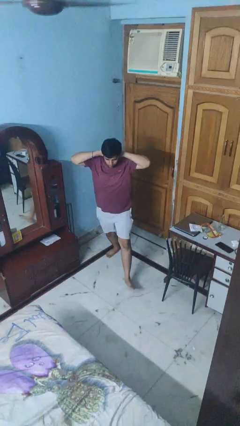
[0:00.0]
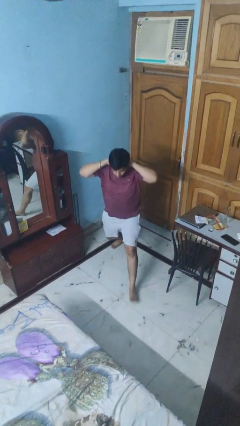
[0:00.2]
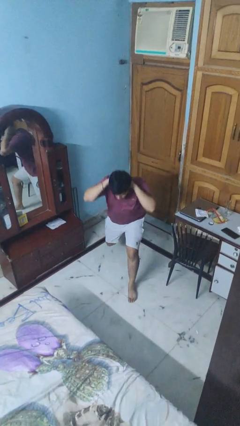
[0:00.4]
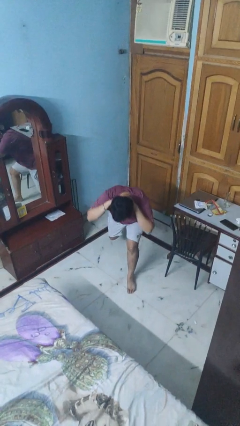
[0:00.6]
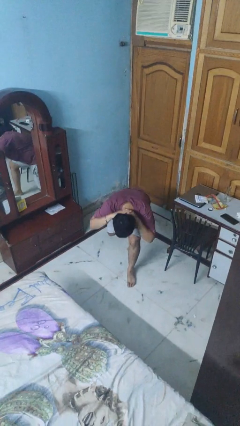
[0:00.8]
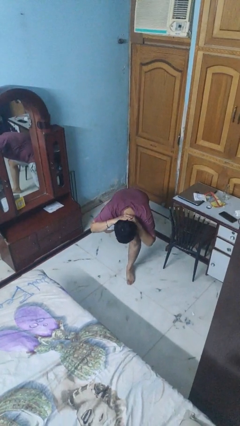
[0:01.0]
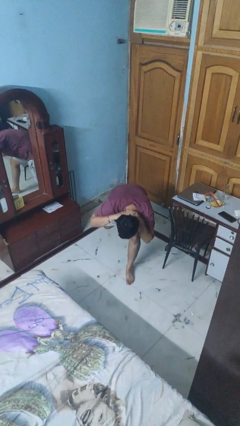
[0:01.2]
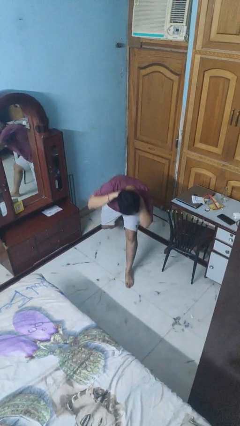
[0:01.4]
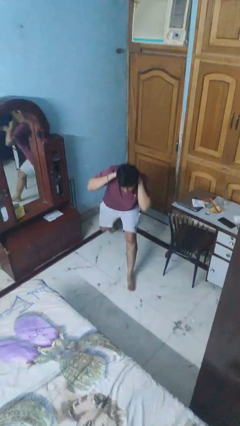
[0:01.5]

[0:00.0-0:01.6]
person exercises with lunges

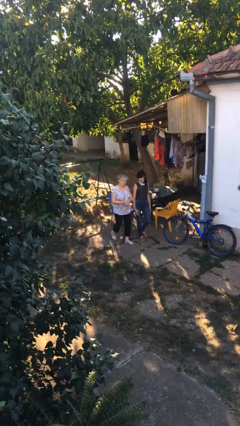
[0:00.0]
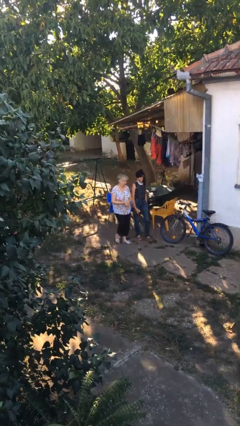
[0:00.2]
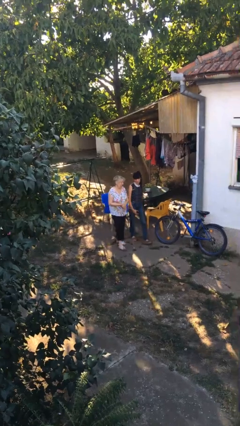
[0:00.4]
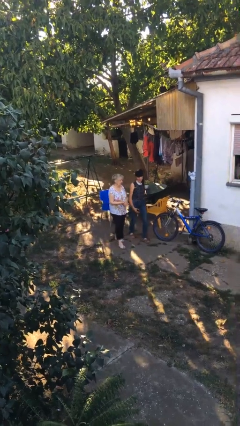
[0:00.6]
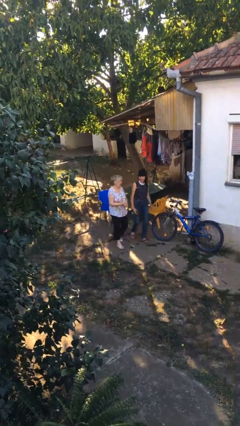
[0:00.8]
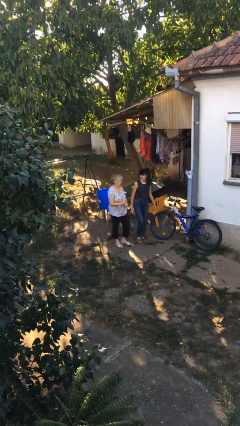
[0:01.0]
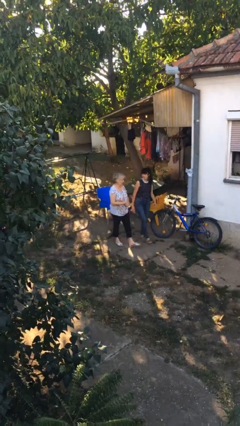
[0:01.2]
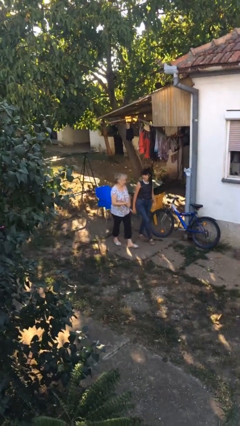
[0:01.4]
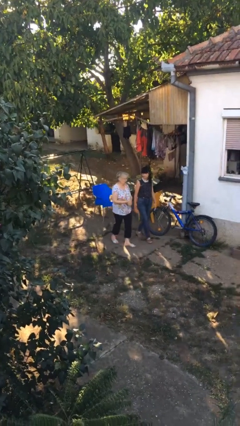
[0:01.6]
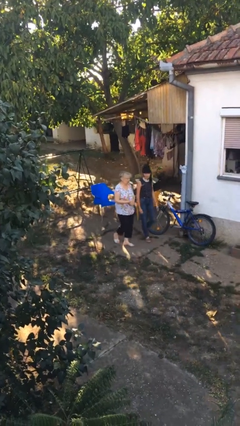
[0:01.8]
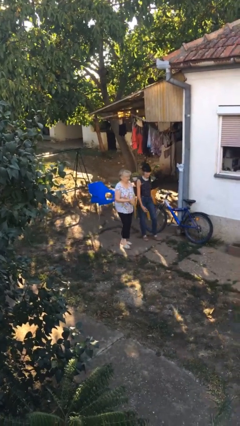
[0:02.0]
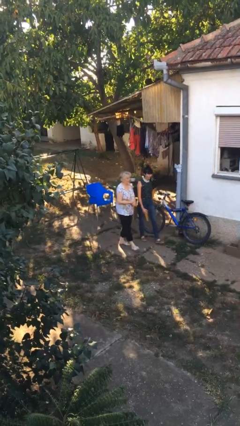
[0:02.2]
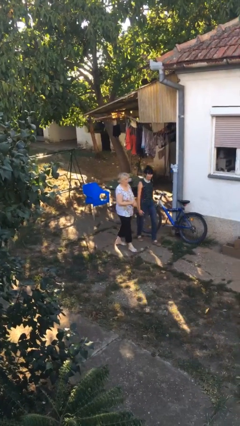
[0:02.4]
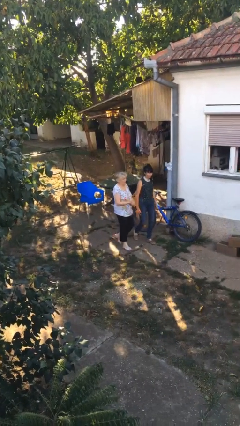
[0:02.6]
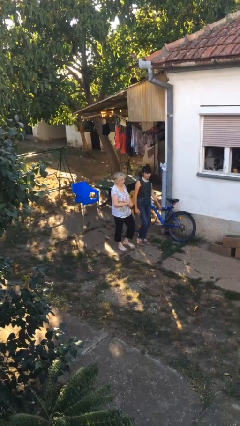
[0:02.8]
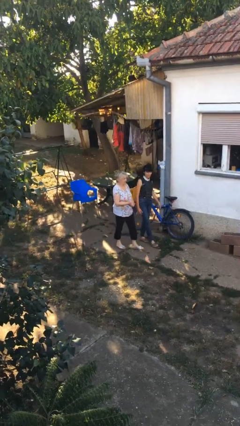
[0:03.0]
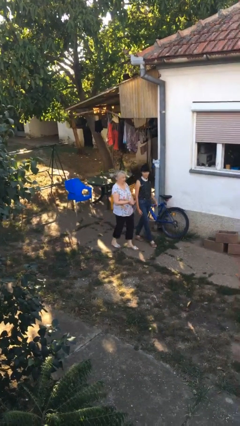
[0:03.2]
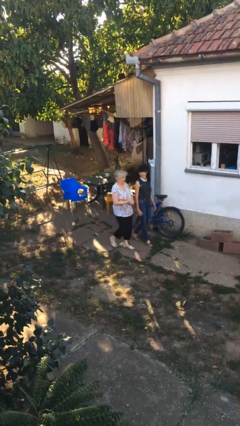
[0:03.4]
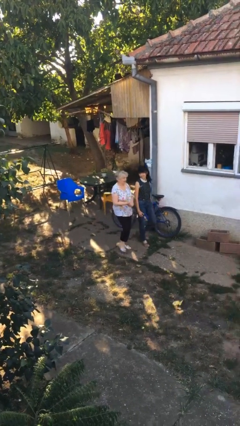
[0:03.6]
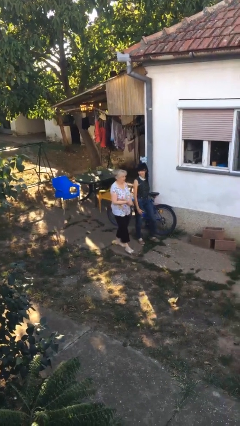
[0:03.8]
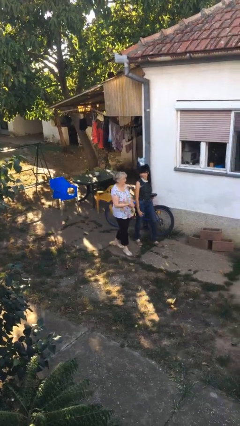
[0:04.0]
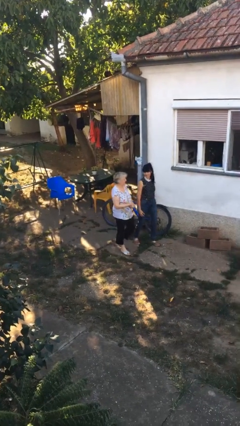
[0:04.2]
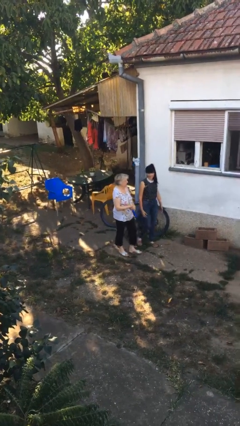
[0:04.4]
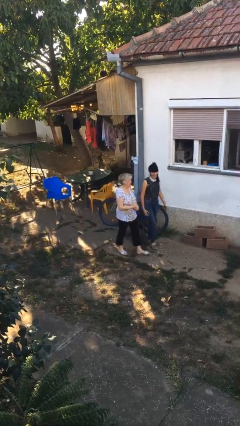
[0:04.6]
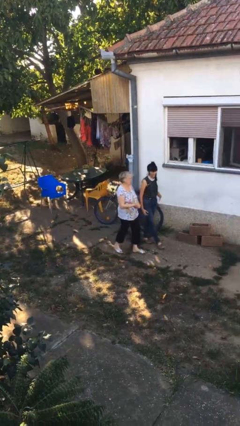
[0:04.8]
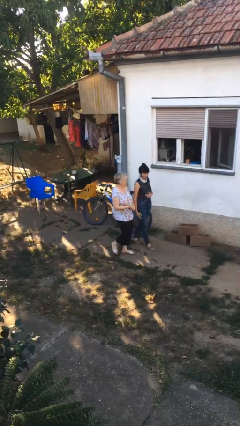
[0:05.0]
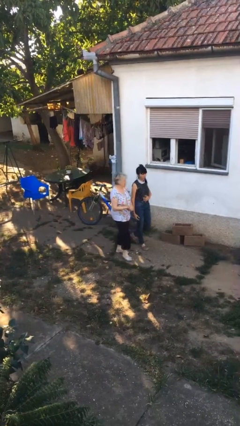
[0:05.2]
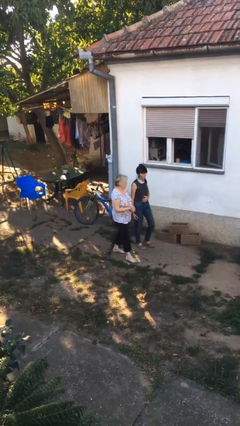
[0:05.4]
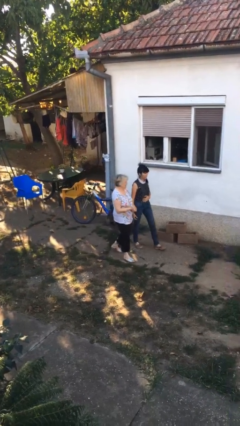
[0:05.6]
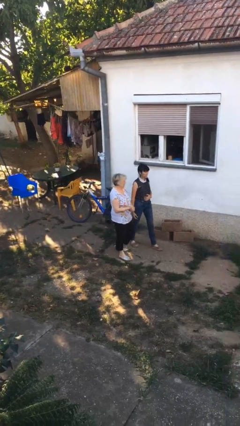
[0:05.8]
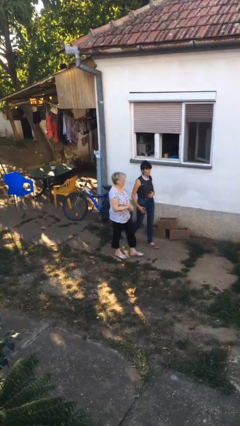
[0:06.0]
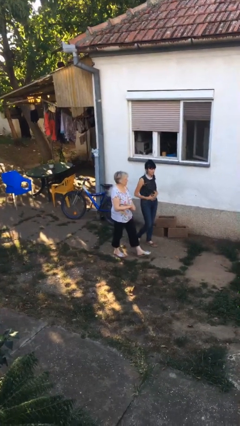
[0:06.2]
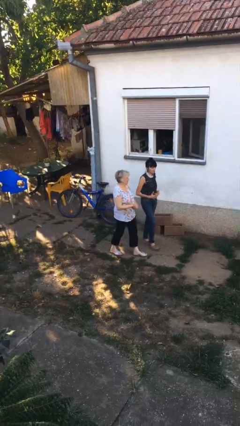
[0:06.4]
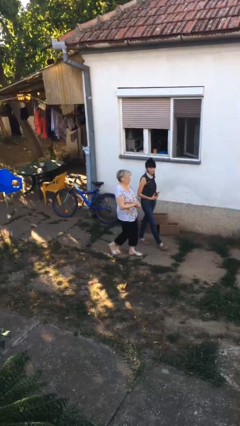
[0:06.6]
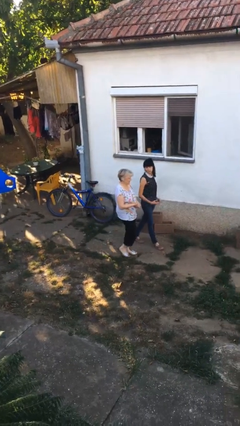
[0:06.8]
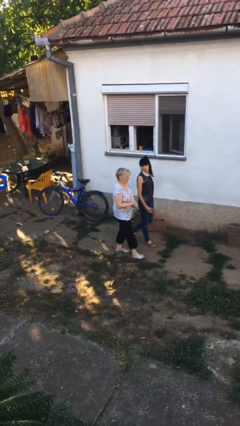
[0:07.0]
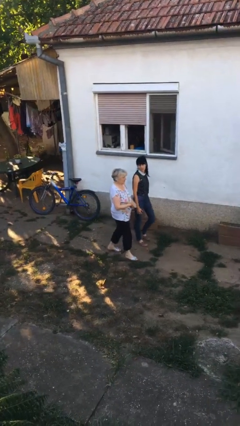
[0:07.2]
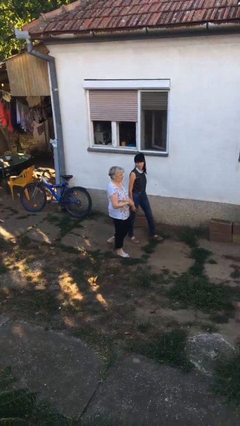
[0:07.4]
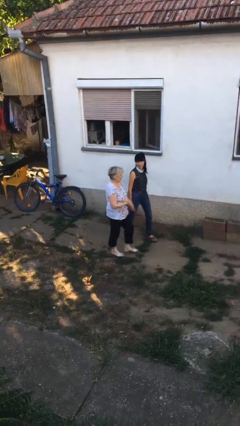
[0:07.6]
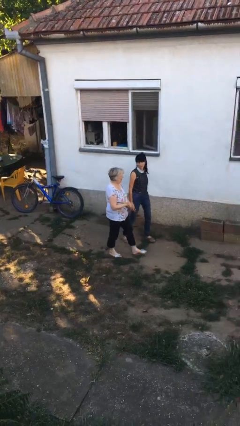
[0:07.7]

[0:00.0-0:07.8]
person talks to person

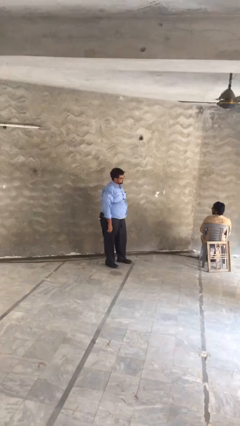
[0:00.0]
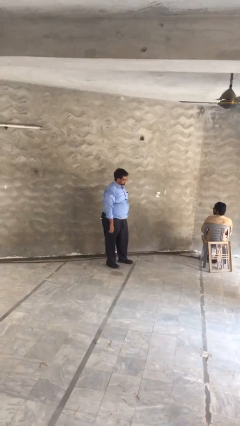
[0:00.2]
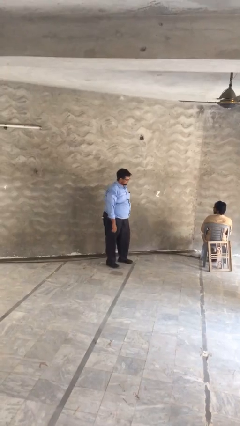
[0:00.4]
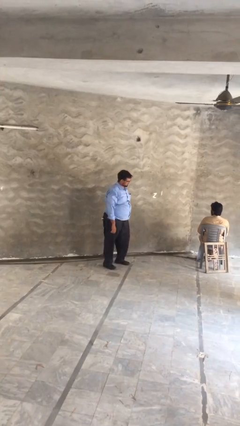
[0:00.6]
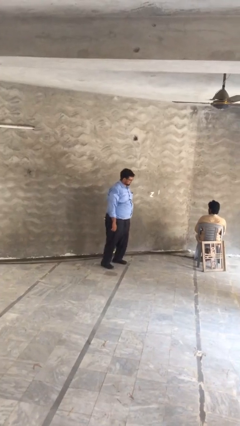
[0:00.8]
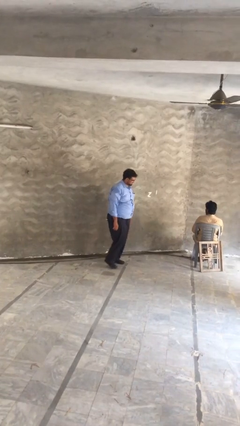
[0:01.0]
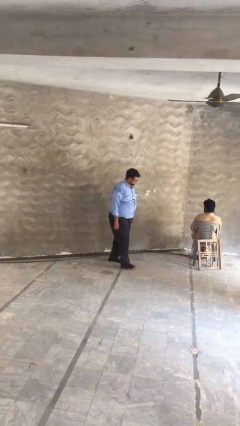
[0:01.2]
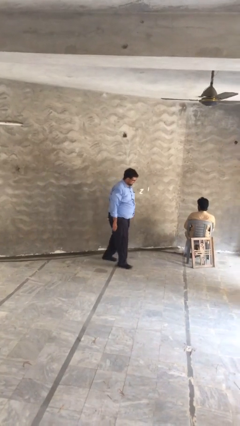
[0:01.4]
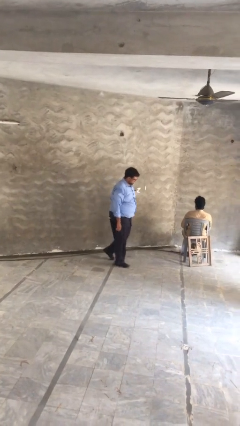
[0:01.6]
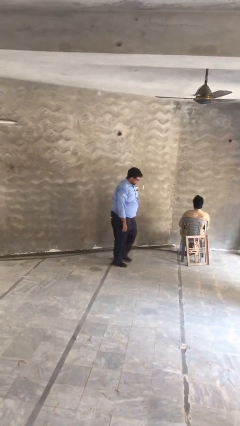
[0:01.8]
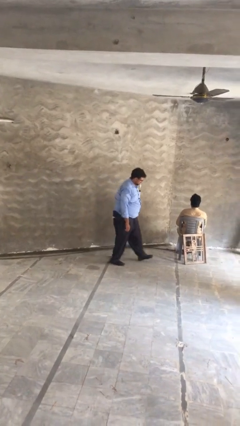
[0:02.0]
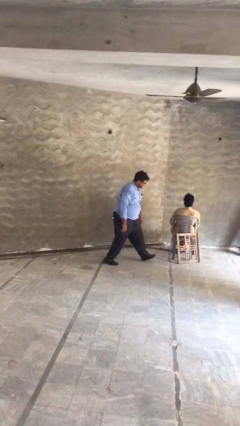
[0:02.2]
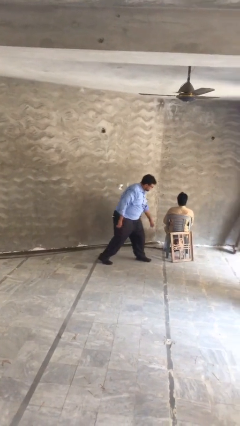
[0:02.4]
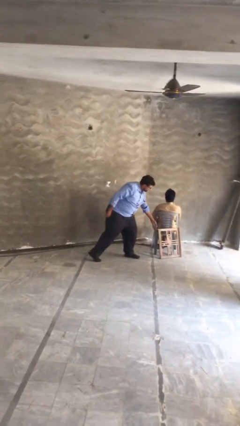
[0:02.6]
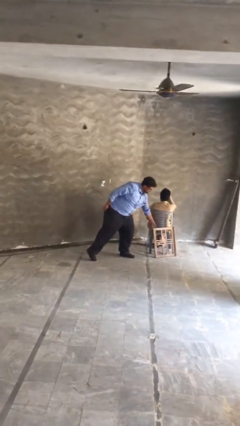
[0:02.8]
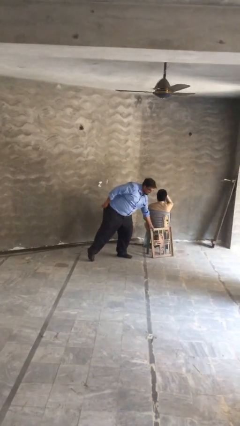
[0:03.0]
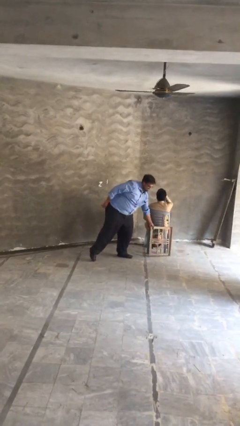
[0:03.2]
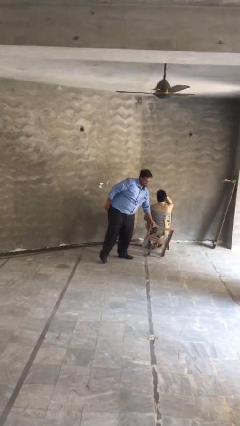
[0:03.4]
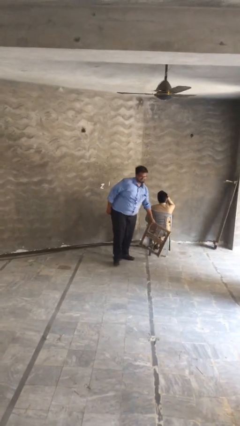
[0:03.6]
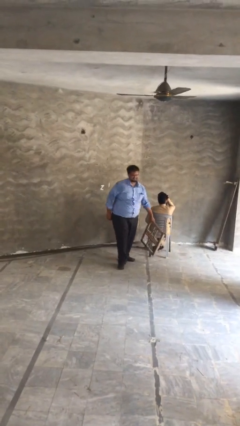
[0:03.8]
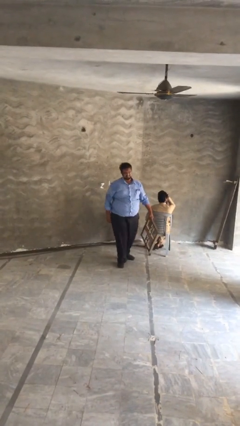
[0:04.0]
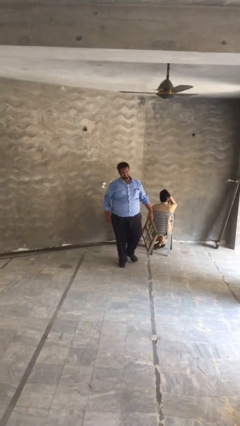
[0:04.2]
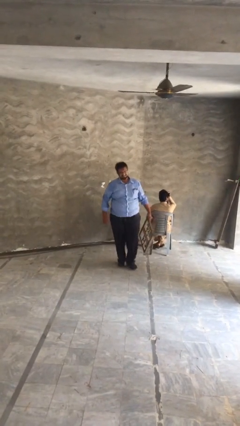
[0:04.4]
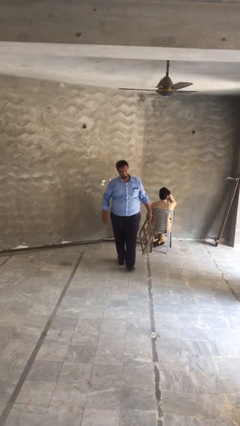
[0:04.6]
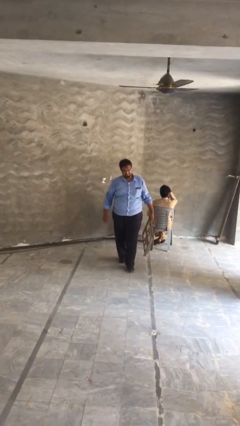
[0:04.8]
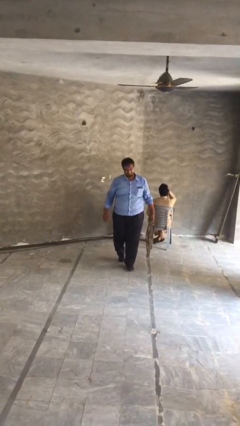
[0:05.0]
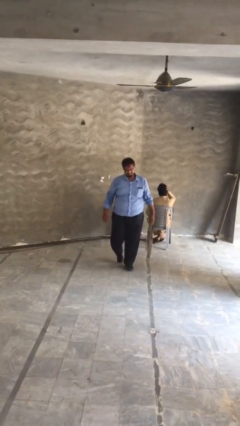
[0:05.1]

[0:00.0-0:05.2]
person steals object from person

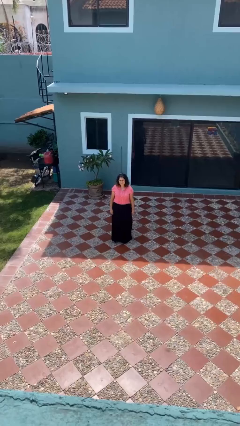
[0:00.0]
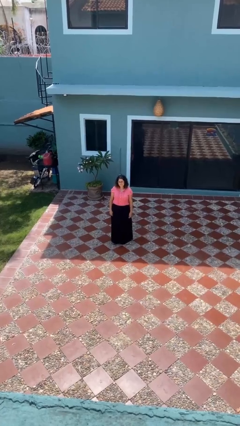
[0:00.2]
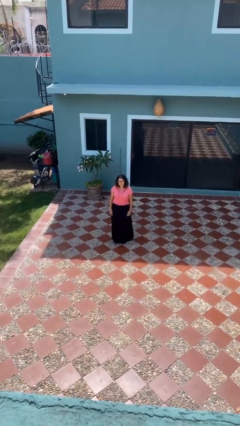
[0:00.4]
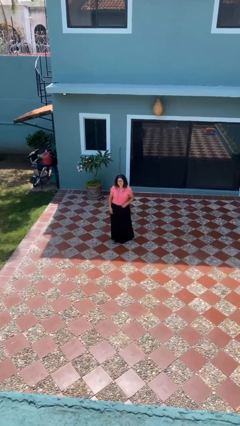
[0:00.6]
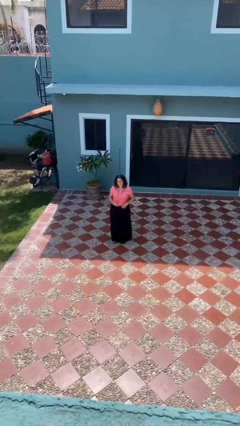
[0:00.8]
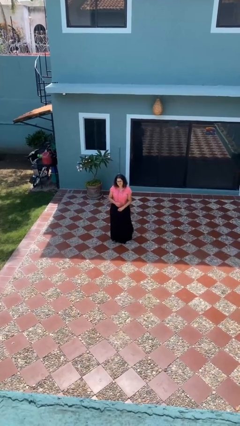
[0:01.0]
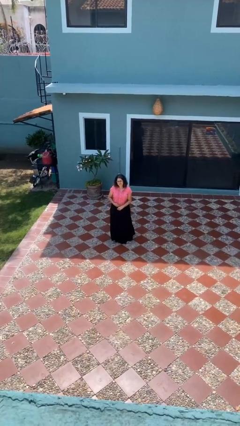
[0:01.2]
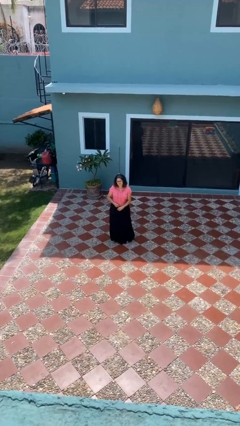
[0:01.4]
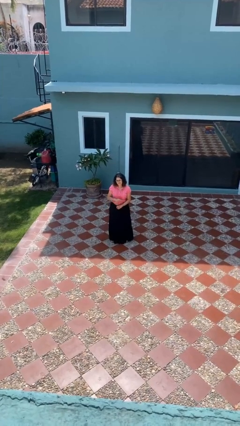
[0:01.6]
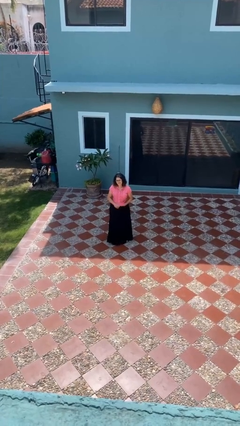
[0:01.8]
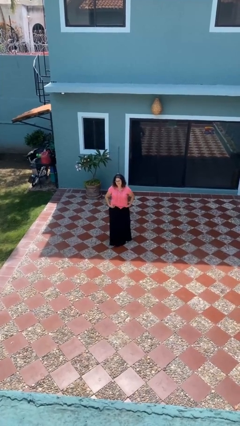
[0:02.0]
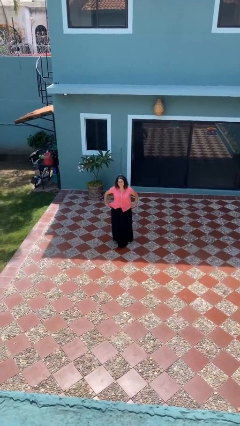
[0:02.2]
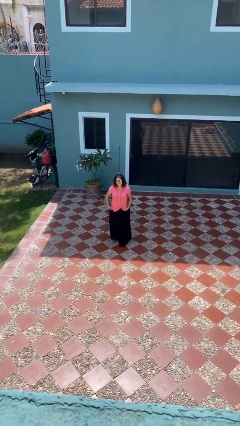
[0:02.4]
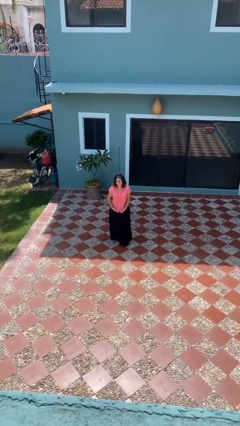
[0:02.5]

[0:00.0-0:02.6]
person untucks shirt
